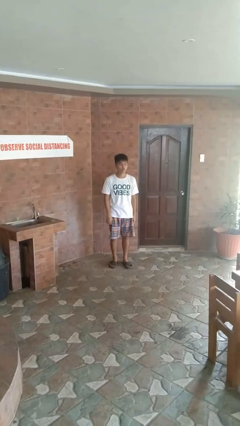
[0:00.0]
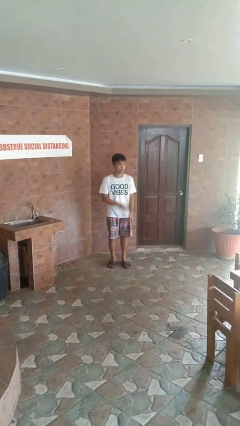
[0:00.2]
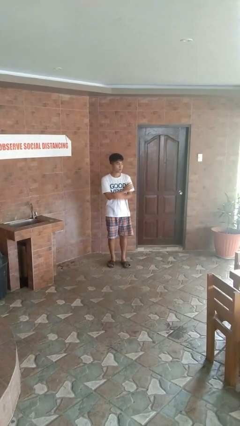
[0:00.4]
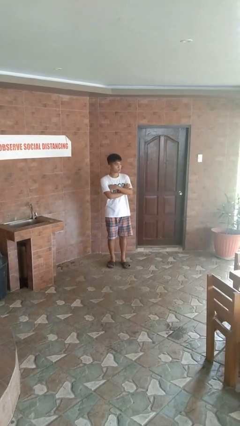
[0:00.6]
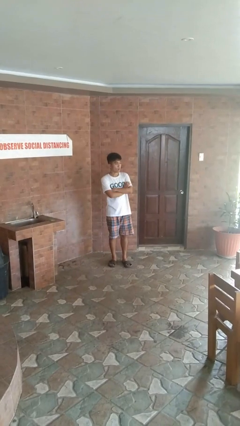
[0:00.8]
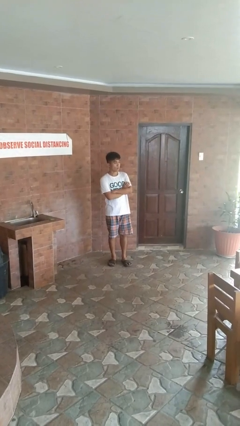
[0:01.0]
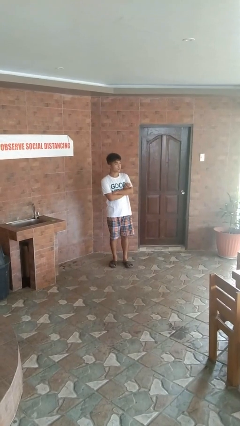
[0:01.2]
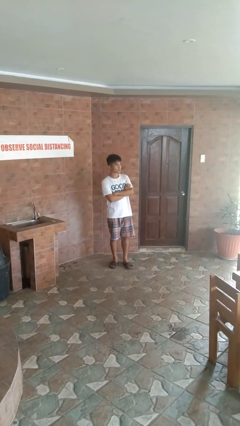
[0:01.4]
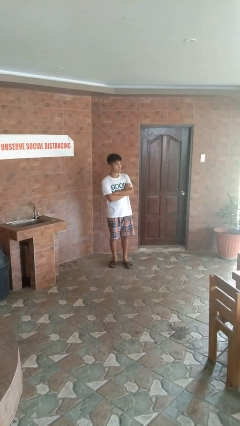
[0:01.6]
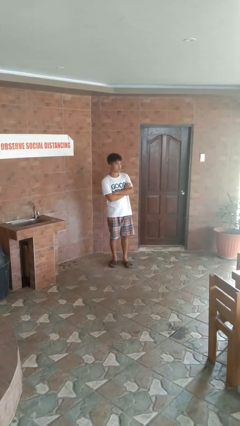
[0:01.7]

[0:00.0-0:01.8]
person crosses arms

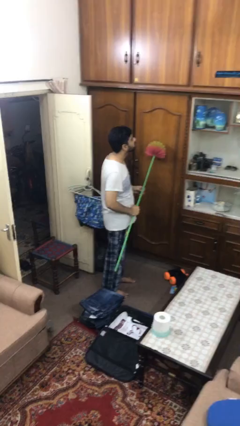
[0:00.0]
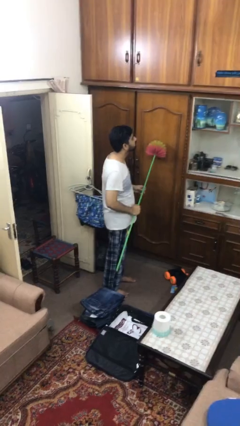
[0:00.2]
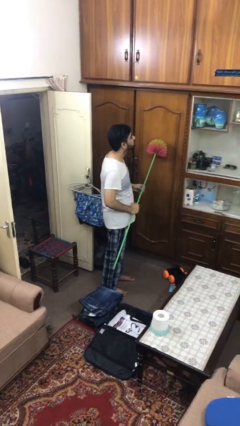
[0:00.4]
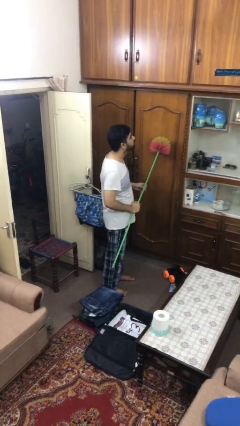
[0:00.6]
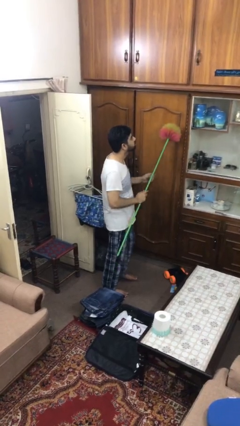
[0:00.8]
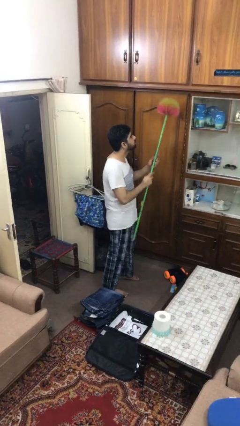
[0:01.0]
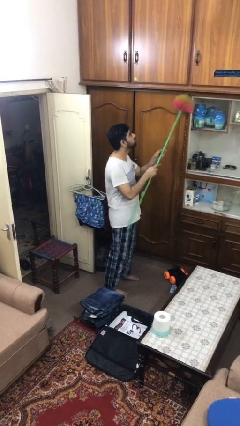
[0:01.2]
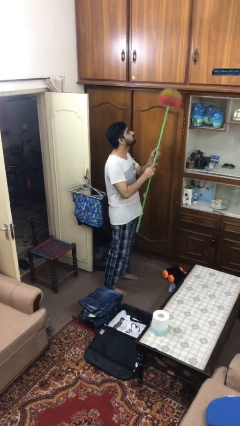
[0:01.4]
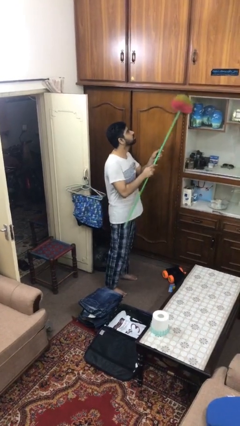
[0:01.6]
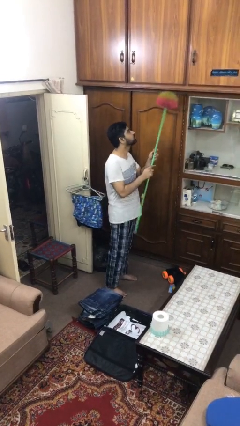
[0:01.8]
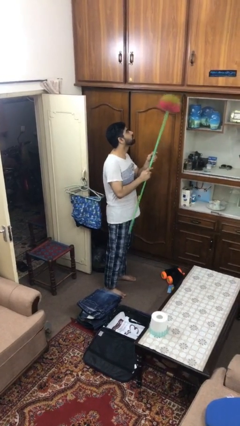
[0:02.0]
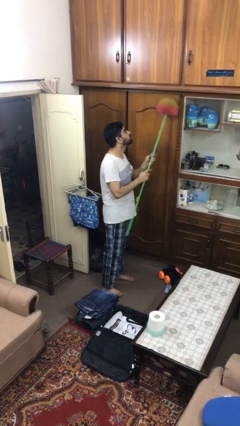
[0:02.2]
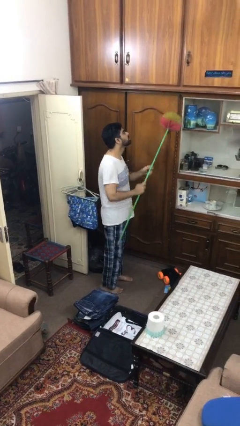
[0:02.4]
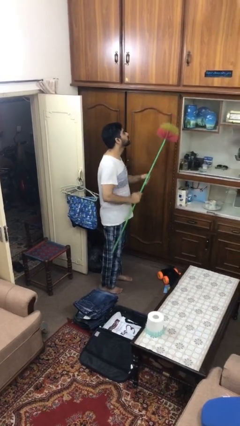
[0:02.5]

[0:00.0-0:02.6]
person dusts furniture

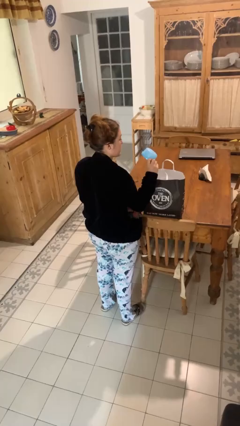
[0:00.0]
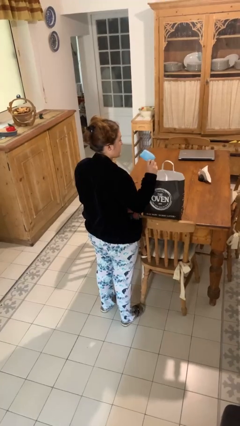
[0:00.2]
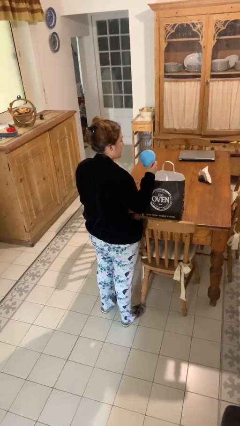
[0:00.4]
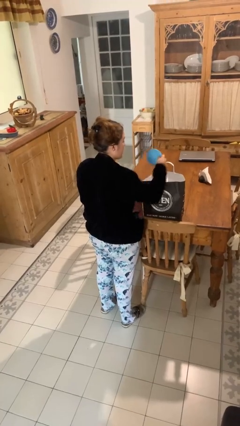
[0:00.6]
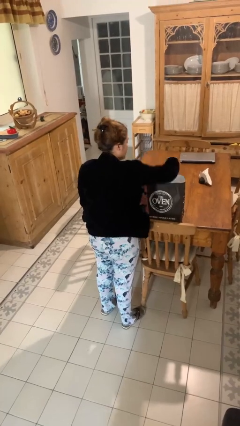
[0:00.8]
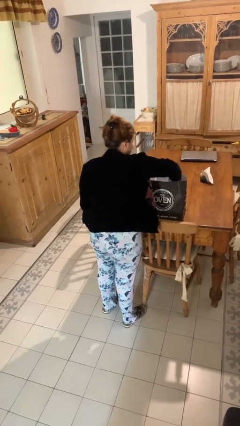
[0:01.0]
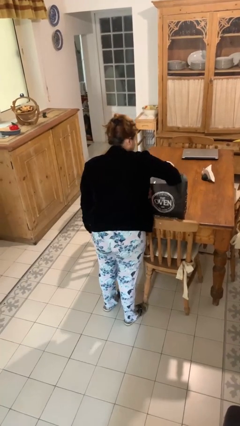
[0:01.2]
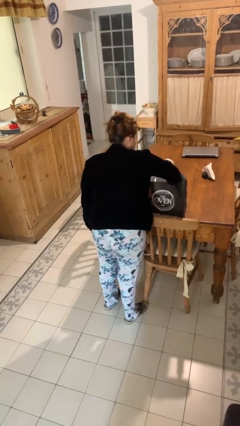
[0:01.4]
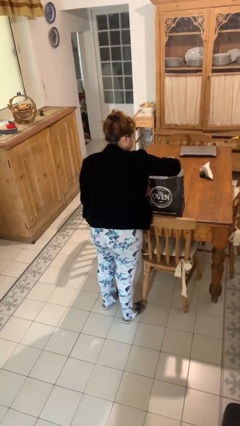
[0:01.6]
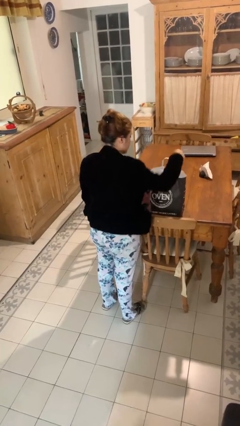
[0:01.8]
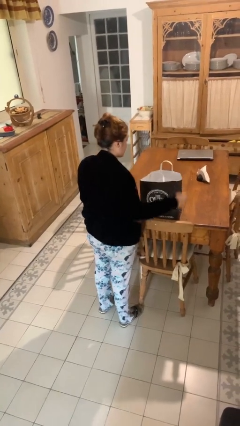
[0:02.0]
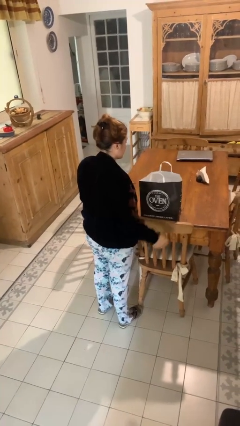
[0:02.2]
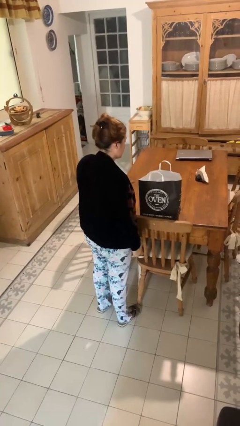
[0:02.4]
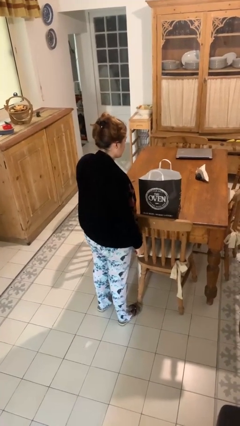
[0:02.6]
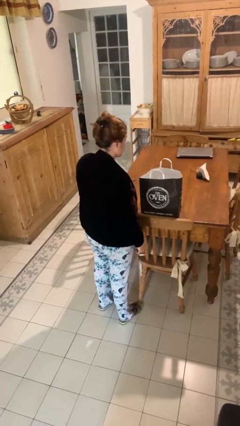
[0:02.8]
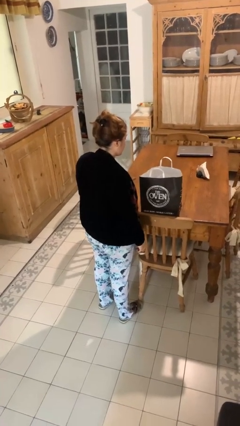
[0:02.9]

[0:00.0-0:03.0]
person puts object into bag

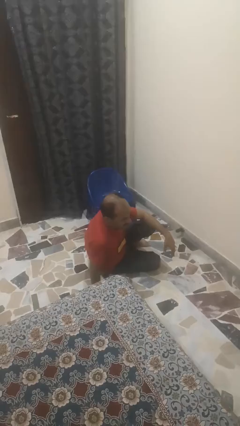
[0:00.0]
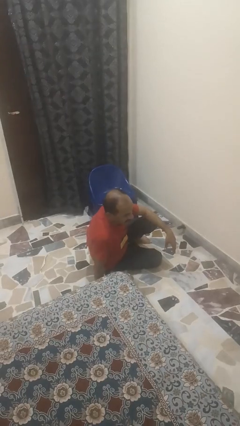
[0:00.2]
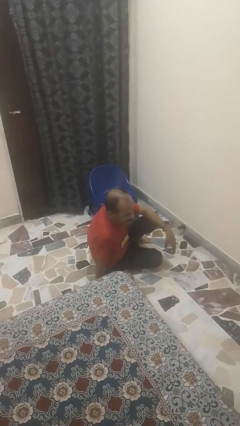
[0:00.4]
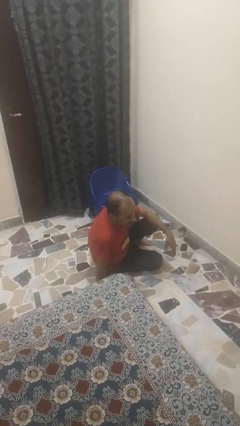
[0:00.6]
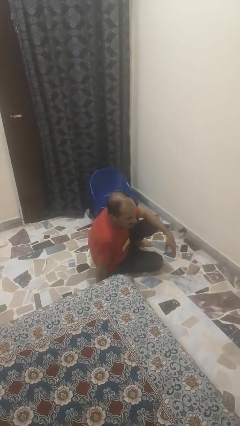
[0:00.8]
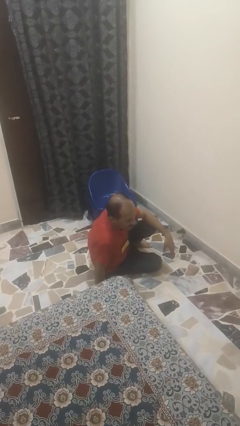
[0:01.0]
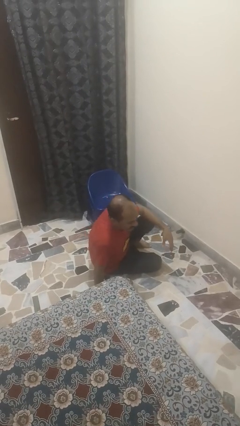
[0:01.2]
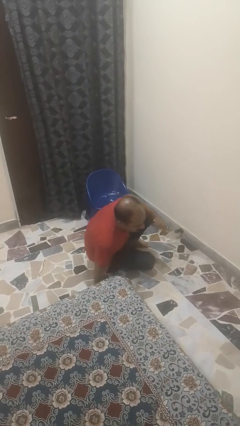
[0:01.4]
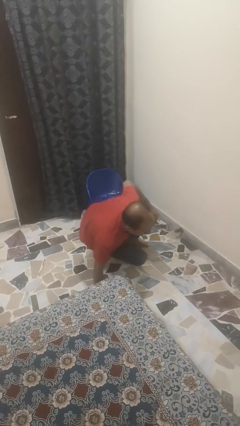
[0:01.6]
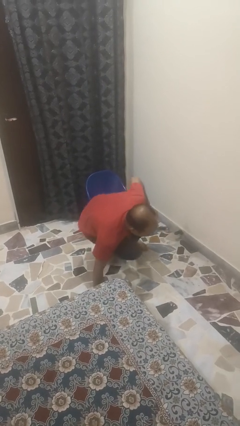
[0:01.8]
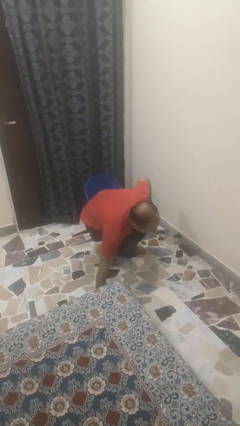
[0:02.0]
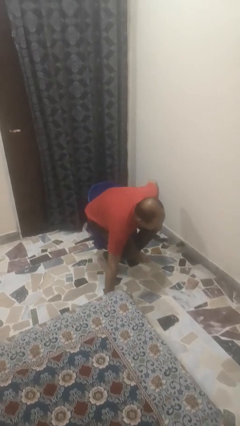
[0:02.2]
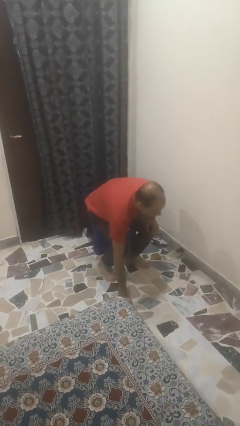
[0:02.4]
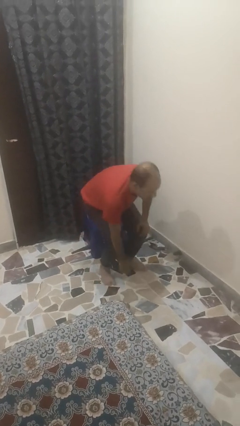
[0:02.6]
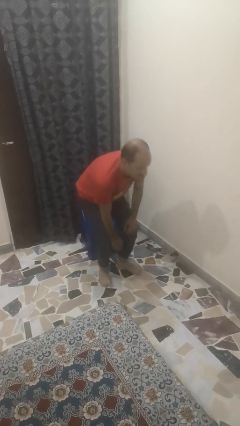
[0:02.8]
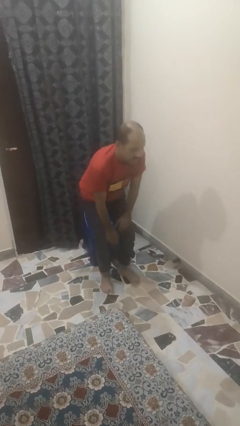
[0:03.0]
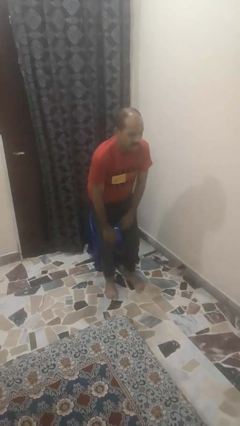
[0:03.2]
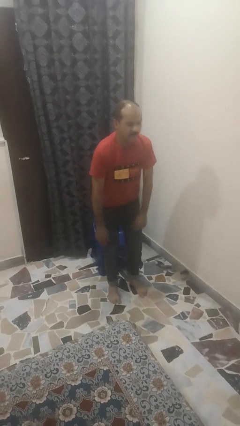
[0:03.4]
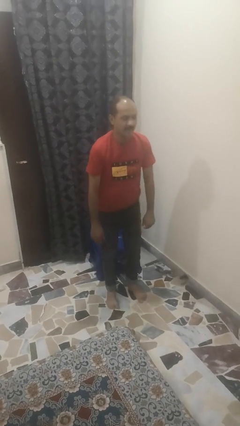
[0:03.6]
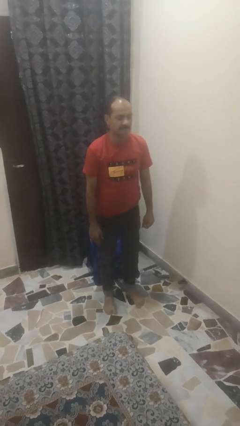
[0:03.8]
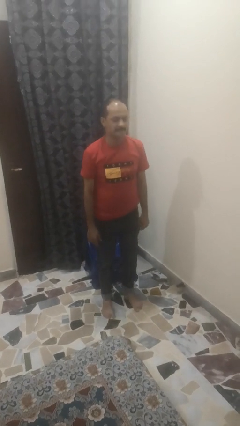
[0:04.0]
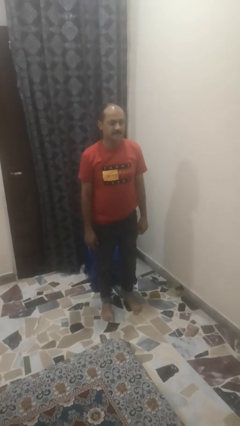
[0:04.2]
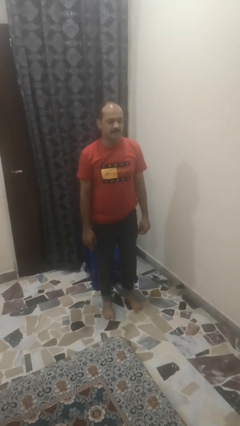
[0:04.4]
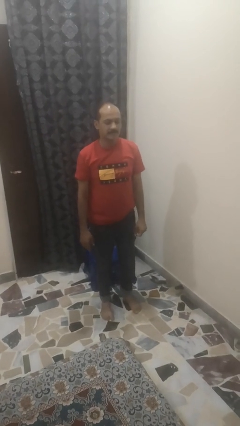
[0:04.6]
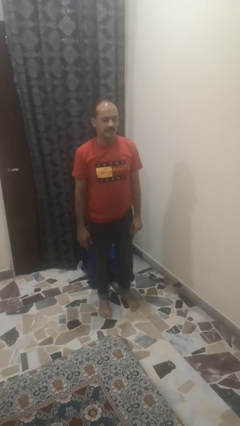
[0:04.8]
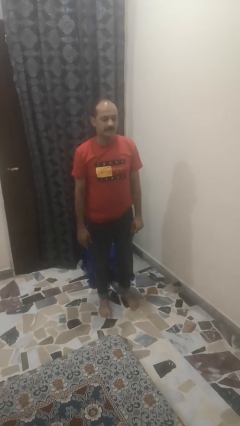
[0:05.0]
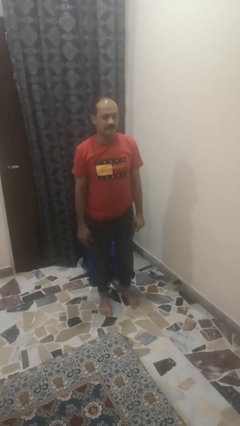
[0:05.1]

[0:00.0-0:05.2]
person stands up from floor

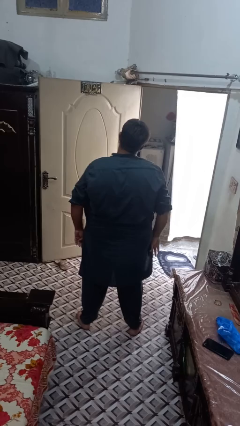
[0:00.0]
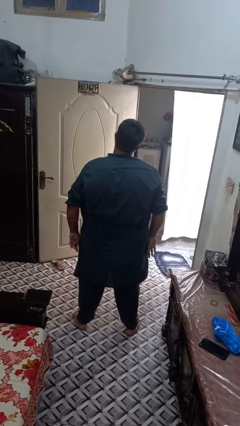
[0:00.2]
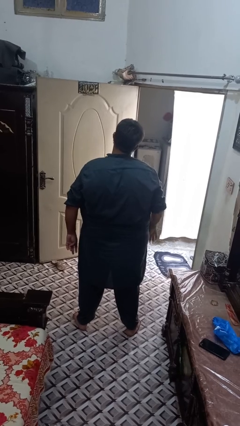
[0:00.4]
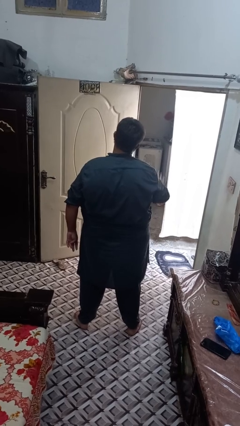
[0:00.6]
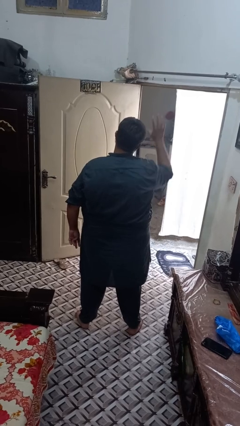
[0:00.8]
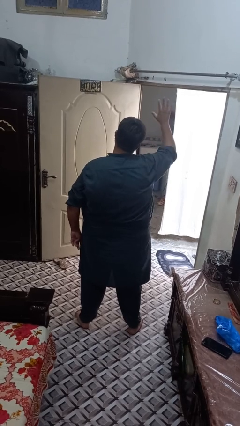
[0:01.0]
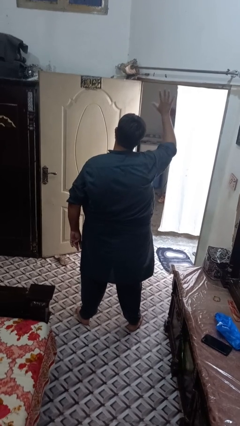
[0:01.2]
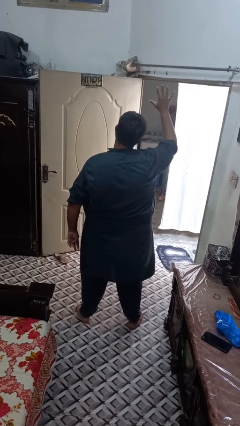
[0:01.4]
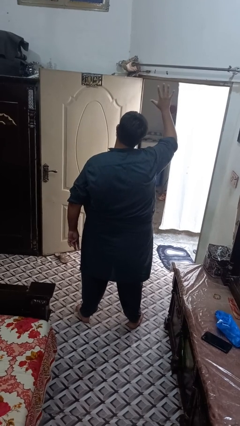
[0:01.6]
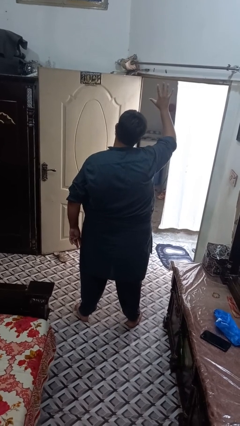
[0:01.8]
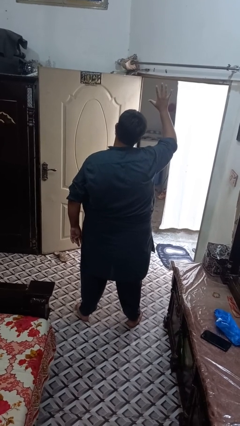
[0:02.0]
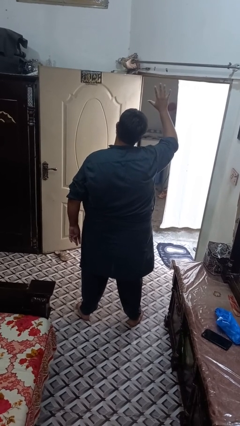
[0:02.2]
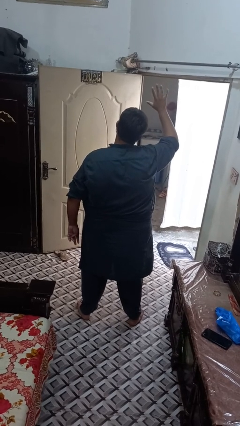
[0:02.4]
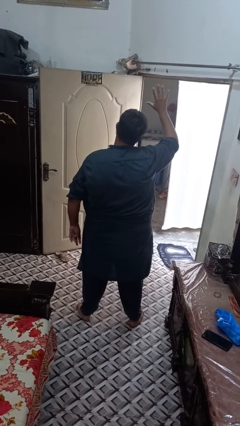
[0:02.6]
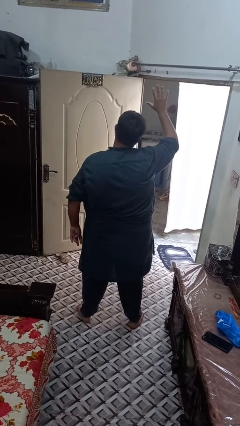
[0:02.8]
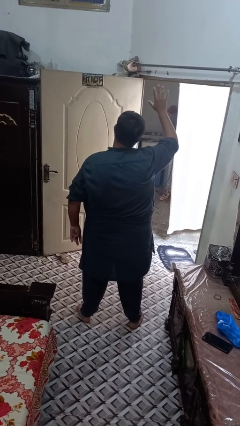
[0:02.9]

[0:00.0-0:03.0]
person gestures number five

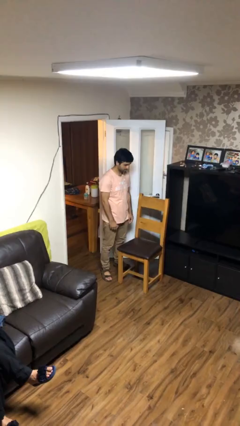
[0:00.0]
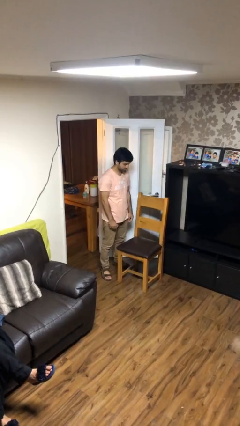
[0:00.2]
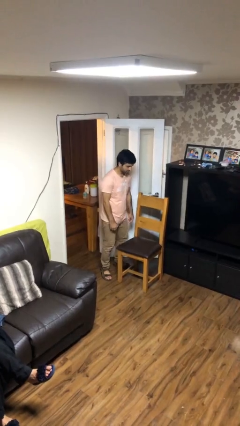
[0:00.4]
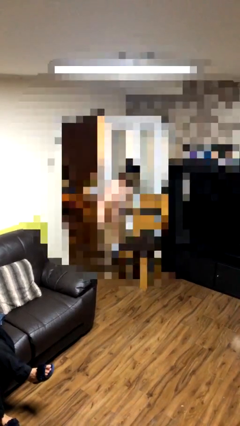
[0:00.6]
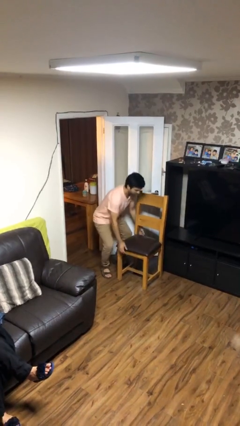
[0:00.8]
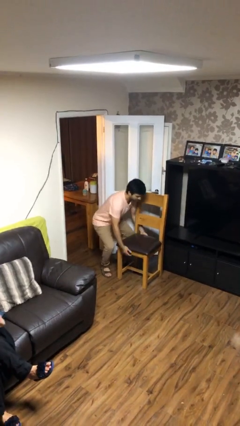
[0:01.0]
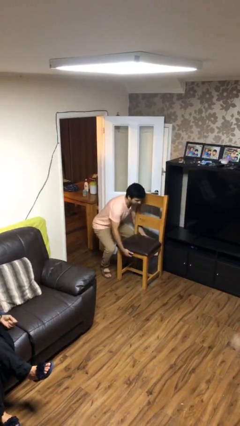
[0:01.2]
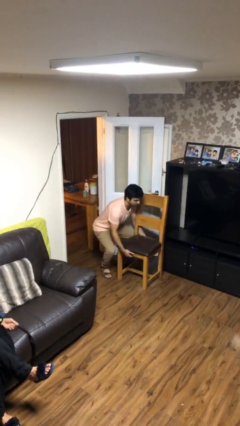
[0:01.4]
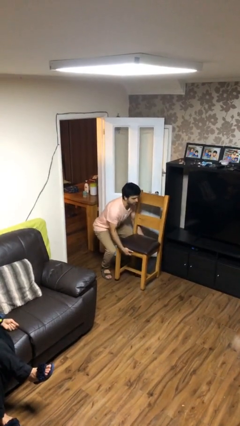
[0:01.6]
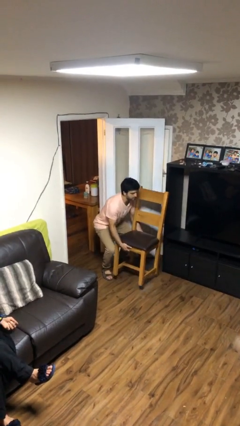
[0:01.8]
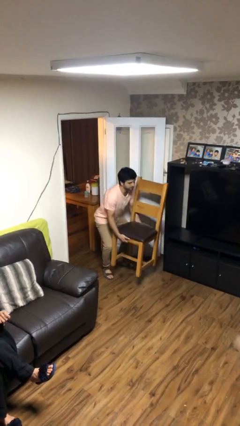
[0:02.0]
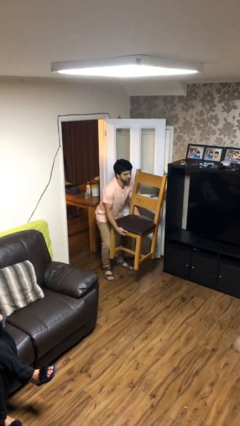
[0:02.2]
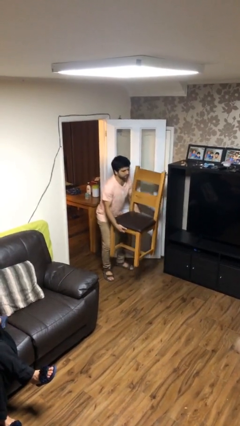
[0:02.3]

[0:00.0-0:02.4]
person picks up object from floor
